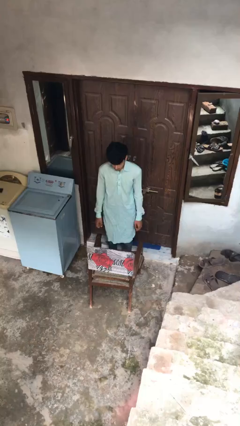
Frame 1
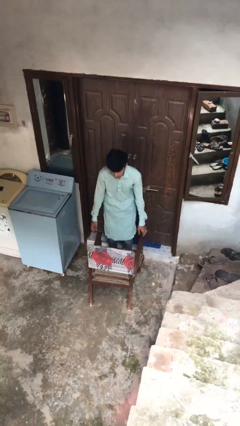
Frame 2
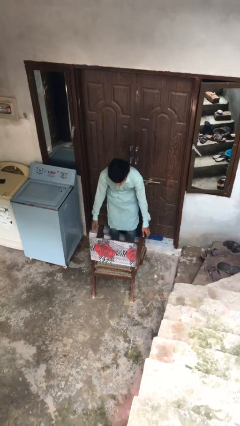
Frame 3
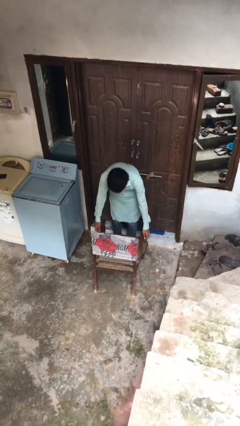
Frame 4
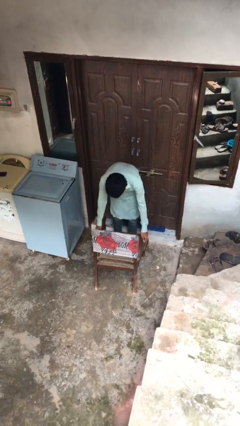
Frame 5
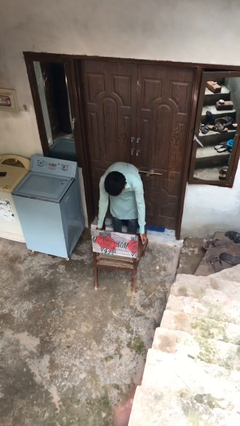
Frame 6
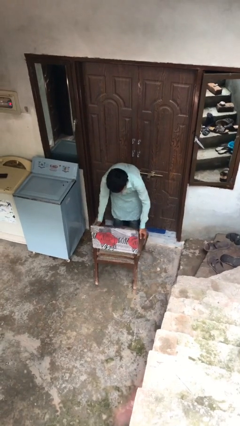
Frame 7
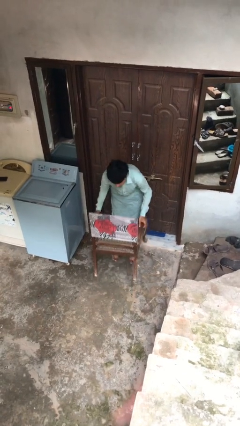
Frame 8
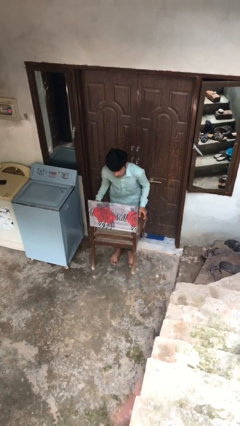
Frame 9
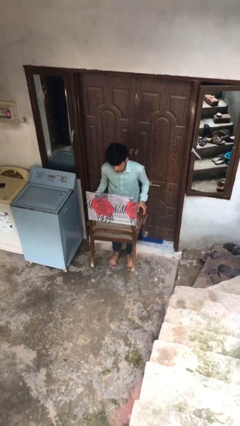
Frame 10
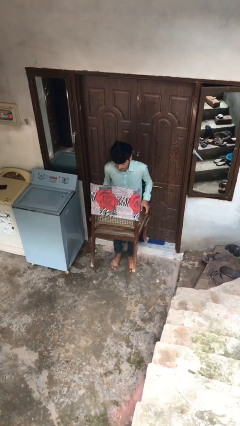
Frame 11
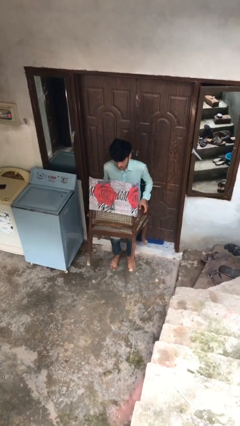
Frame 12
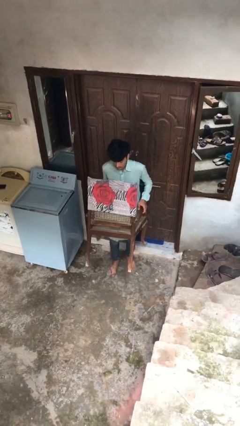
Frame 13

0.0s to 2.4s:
person picks up object from floor

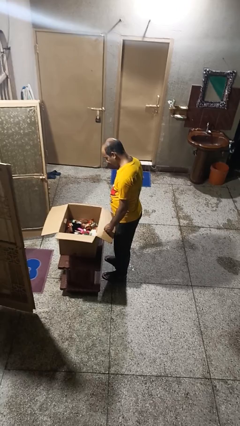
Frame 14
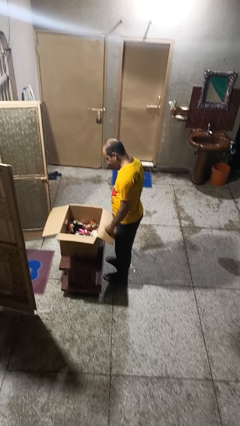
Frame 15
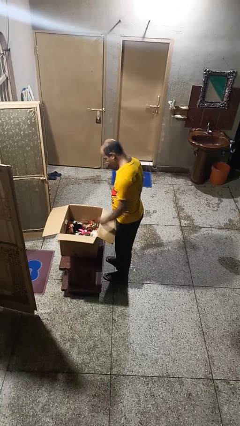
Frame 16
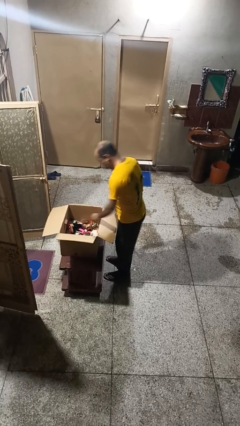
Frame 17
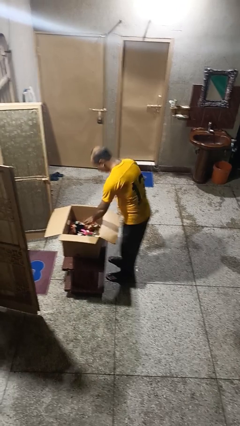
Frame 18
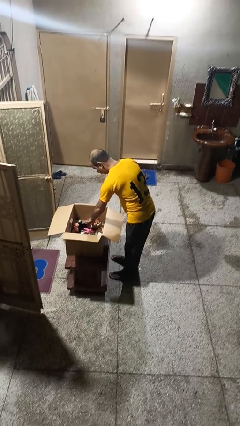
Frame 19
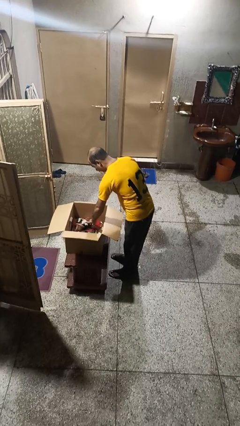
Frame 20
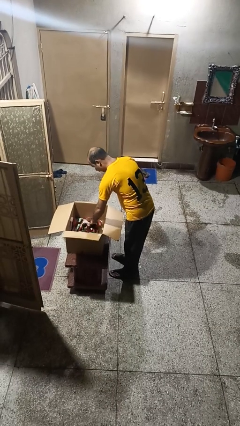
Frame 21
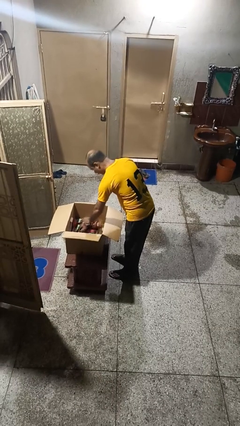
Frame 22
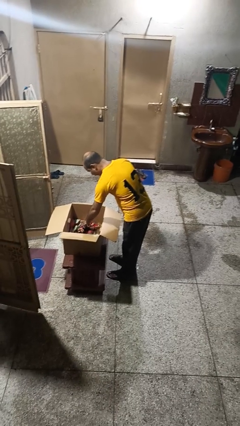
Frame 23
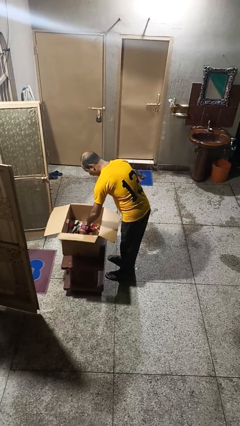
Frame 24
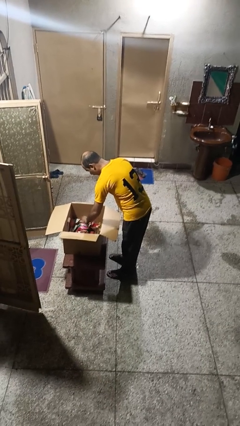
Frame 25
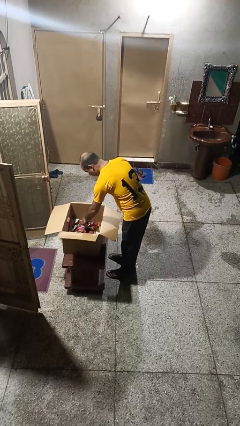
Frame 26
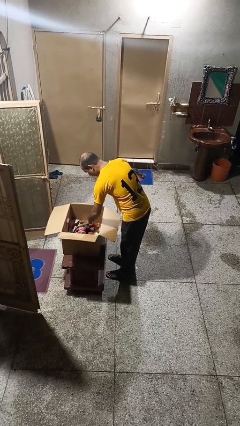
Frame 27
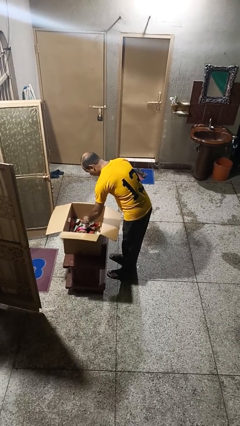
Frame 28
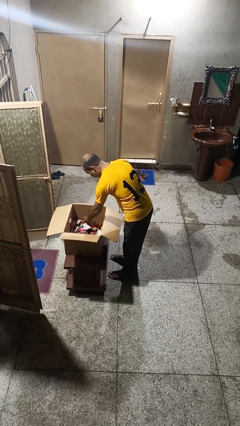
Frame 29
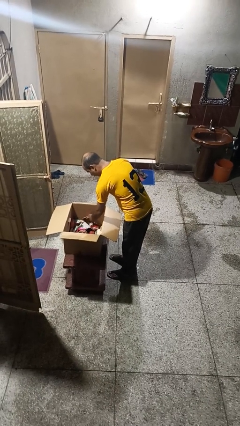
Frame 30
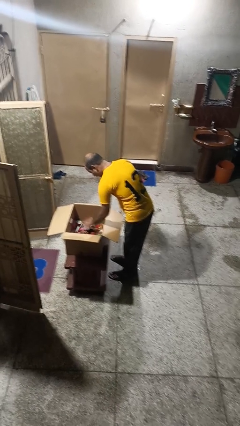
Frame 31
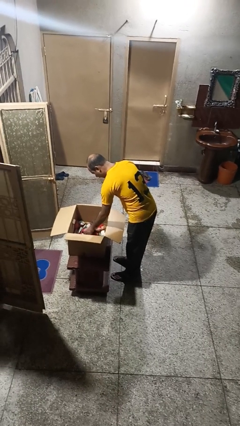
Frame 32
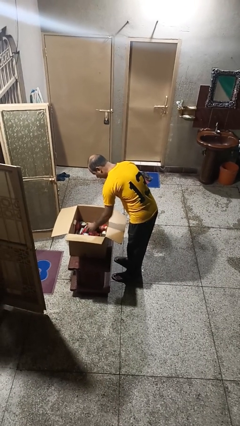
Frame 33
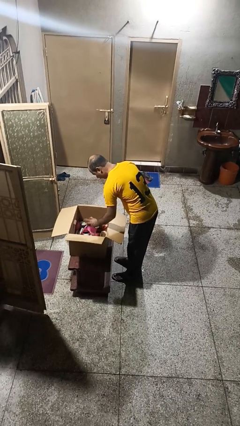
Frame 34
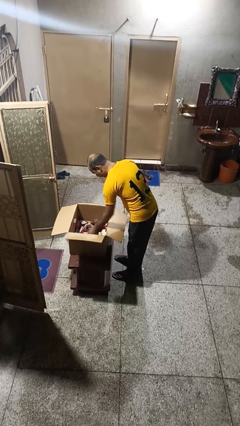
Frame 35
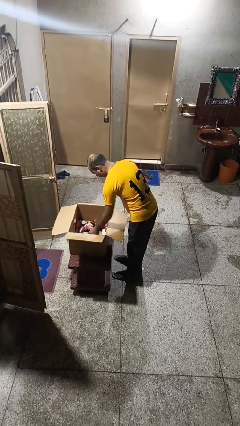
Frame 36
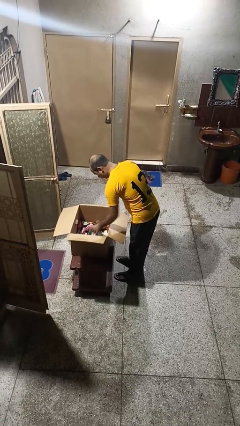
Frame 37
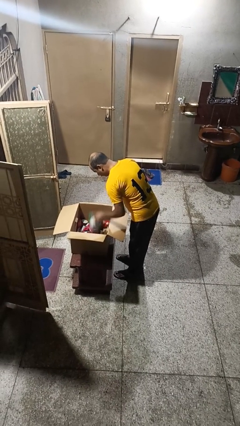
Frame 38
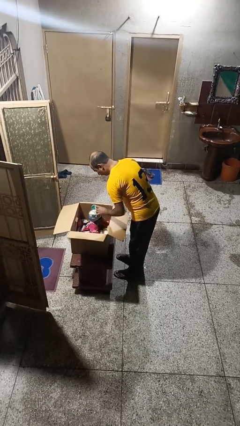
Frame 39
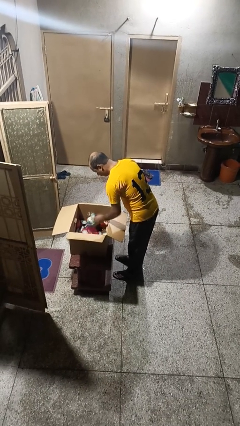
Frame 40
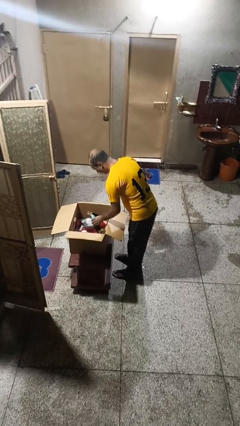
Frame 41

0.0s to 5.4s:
person searches in box

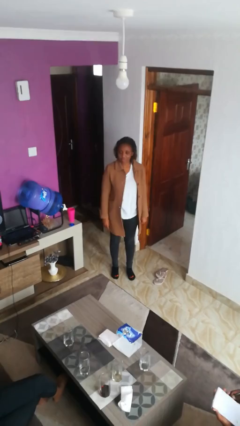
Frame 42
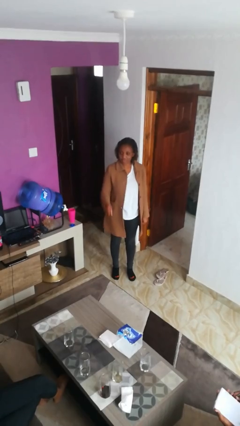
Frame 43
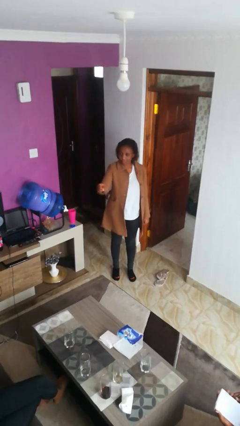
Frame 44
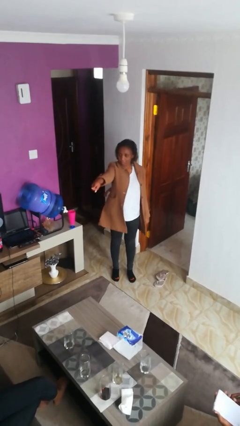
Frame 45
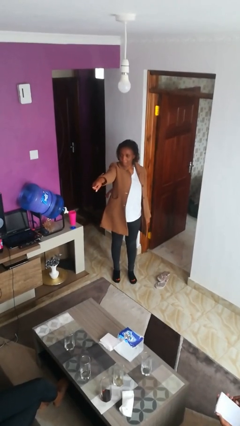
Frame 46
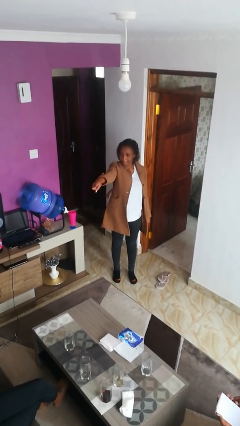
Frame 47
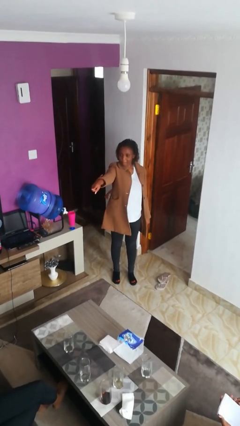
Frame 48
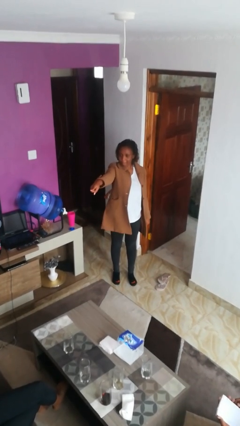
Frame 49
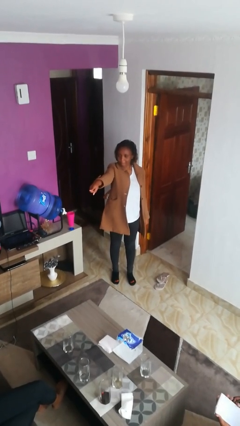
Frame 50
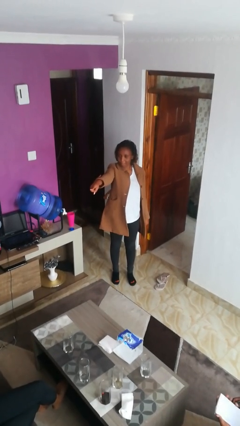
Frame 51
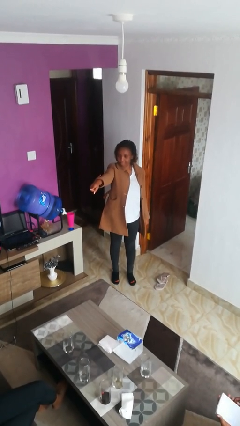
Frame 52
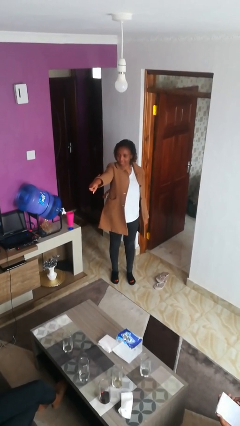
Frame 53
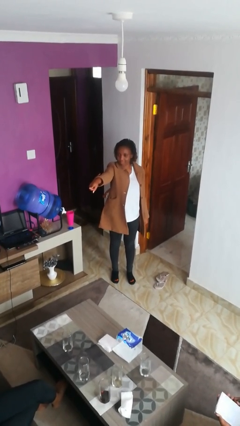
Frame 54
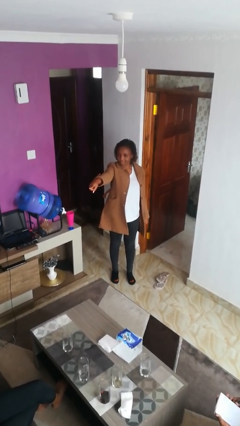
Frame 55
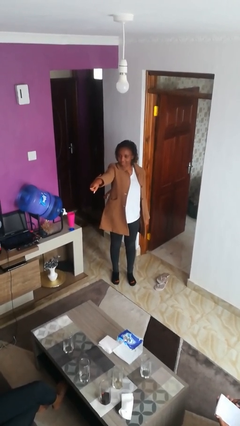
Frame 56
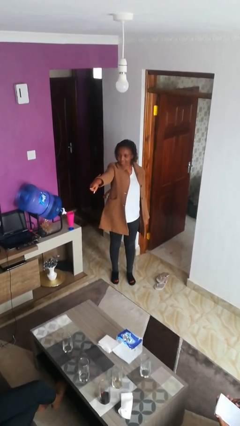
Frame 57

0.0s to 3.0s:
person points at person

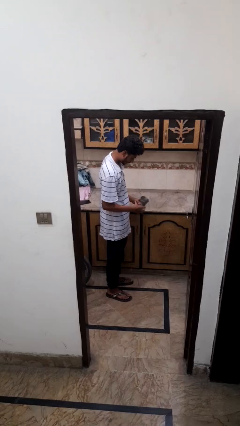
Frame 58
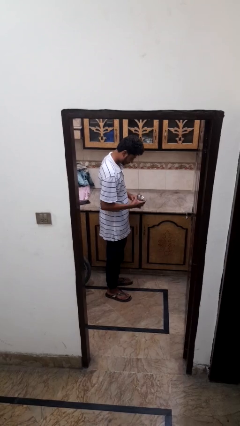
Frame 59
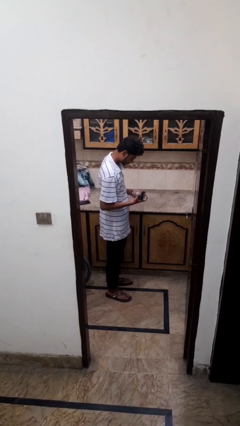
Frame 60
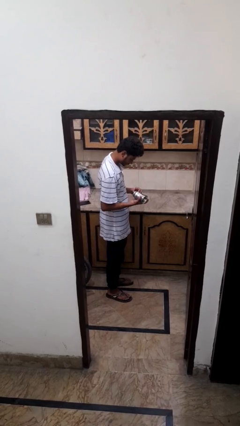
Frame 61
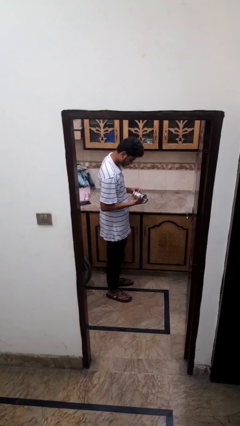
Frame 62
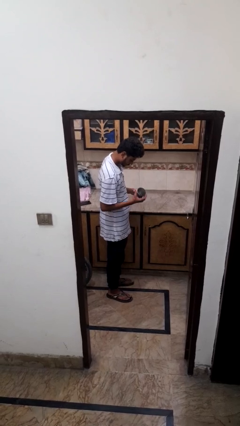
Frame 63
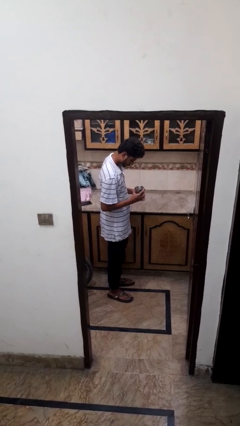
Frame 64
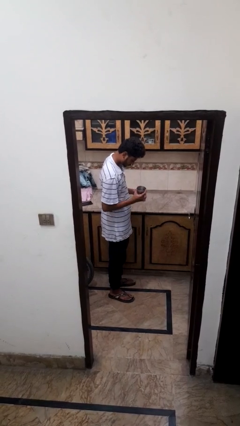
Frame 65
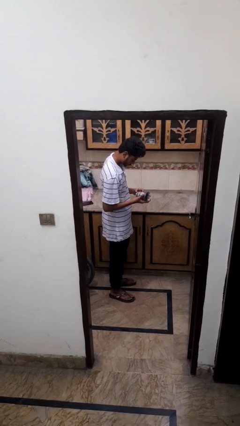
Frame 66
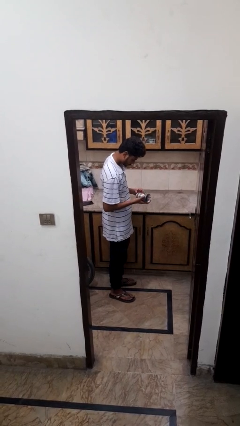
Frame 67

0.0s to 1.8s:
person picks up object from countertop

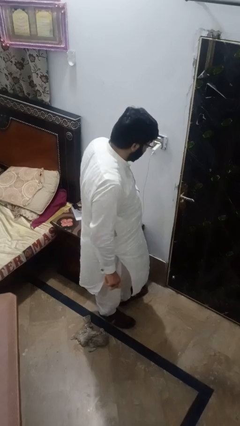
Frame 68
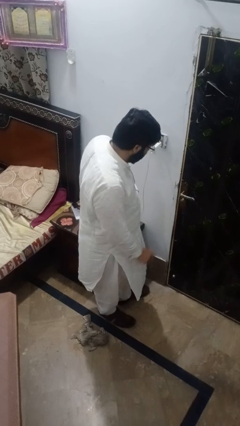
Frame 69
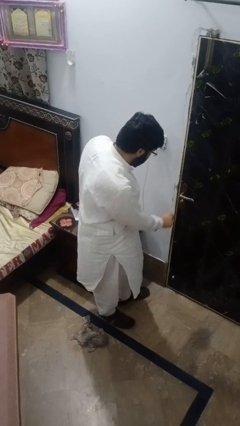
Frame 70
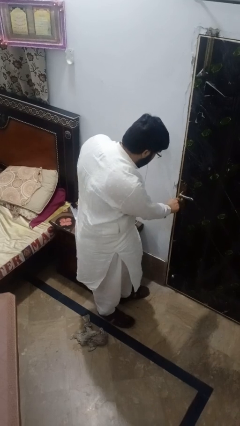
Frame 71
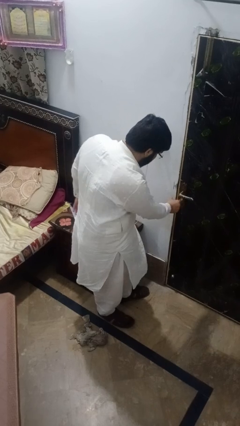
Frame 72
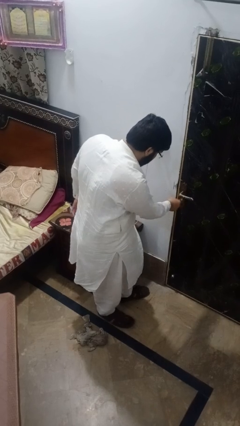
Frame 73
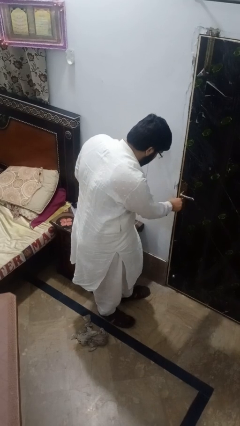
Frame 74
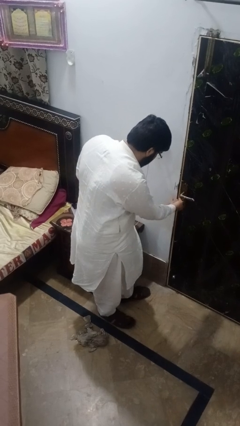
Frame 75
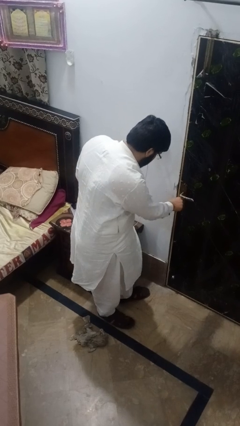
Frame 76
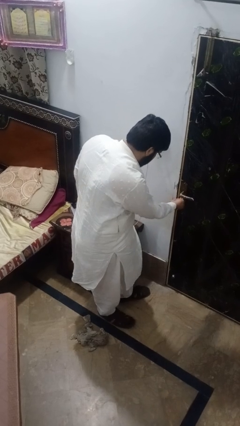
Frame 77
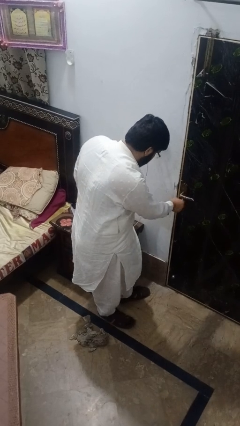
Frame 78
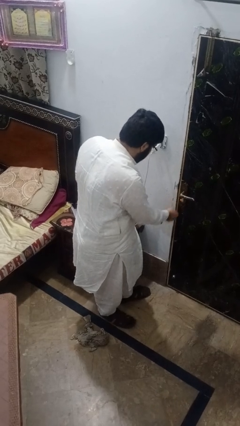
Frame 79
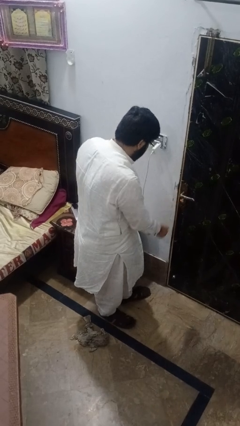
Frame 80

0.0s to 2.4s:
person locks door with keys

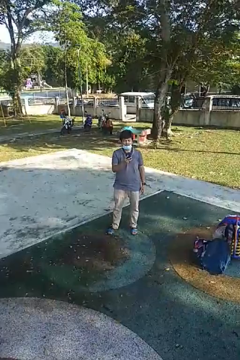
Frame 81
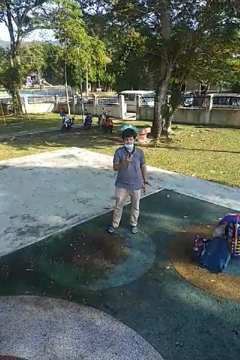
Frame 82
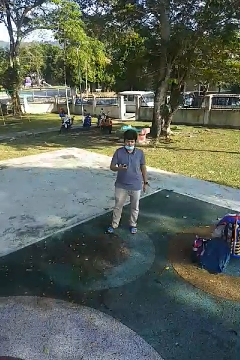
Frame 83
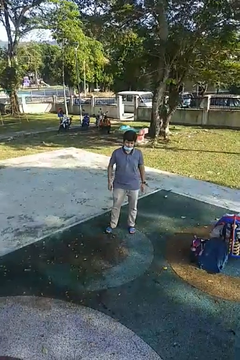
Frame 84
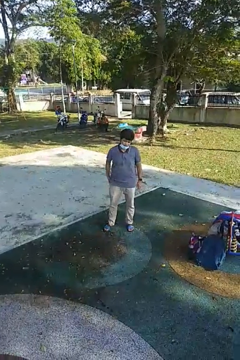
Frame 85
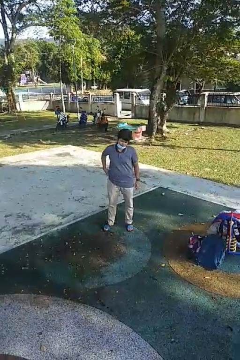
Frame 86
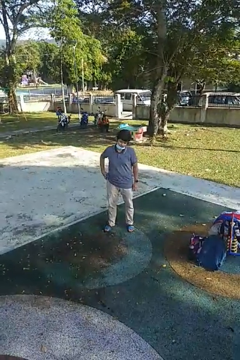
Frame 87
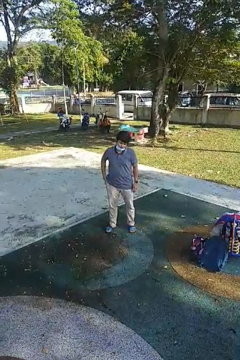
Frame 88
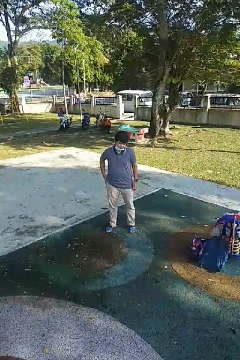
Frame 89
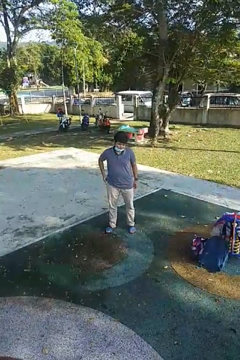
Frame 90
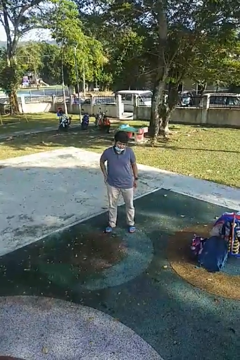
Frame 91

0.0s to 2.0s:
person puts phone into pocket

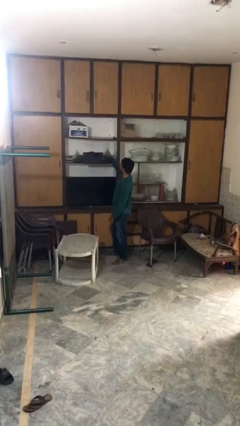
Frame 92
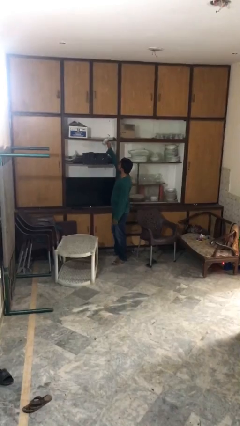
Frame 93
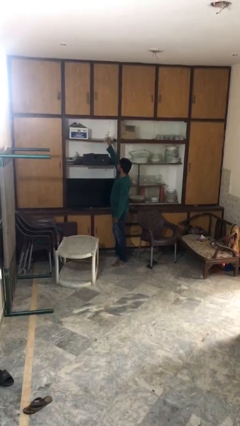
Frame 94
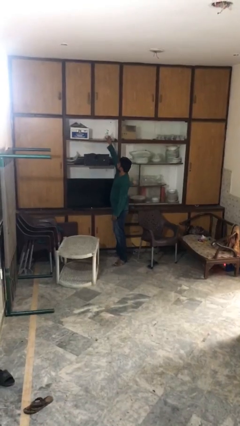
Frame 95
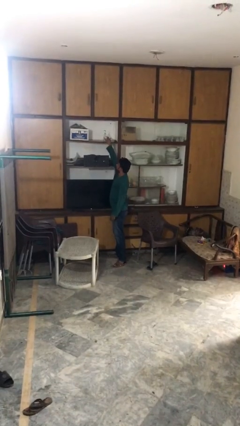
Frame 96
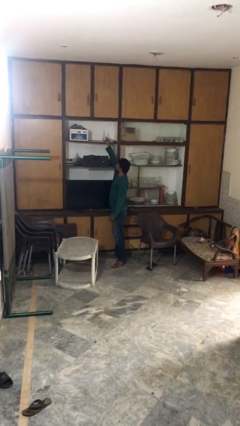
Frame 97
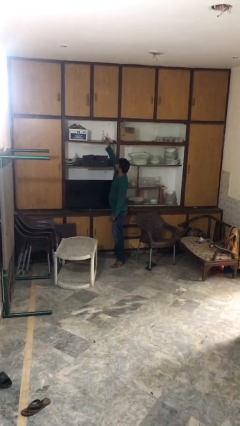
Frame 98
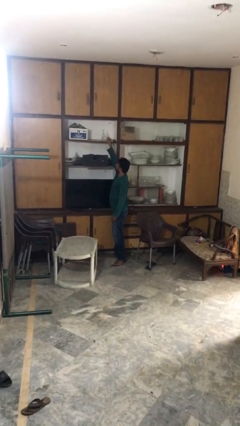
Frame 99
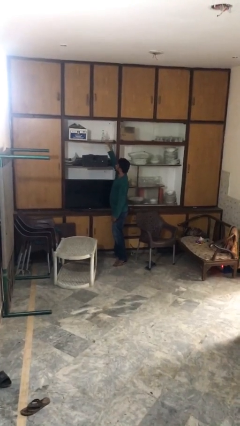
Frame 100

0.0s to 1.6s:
person puts down object on shelf
